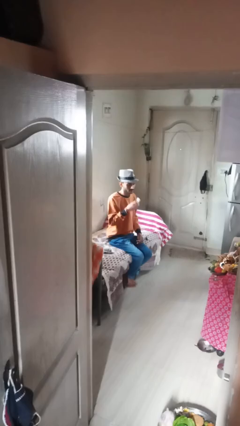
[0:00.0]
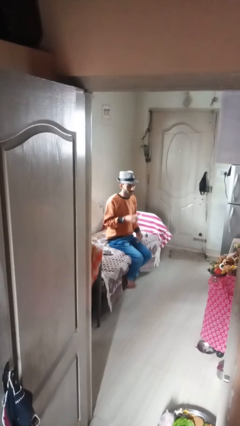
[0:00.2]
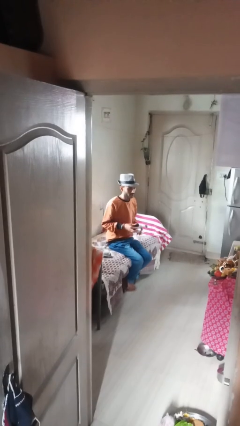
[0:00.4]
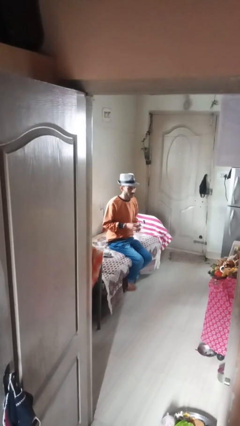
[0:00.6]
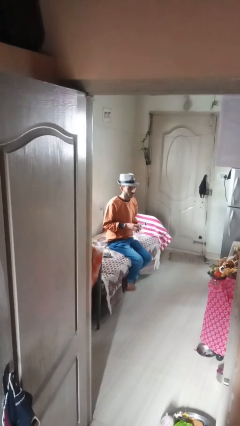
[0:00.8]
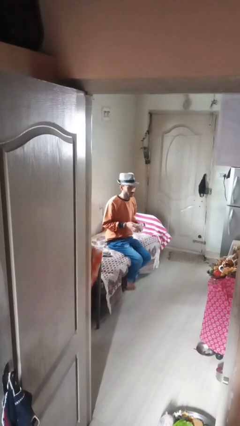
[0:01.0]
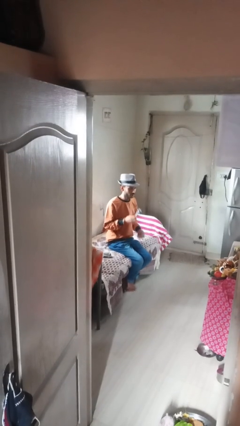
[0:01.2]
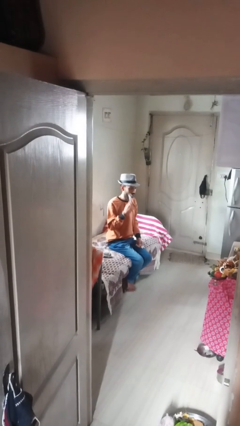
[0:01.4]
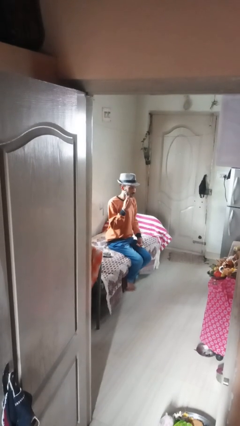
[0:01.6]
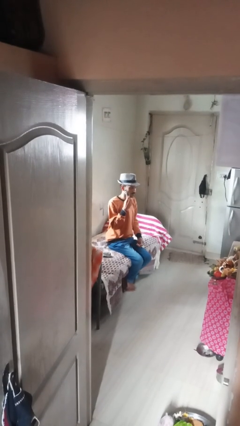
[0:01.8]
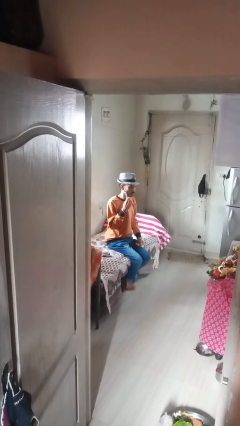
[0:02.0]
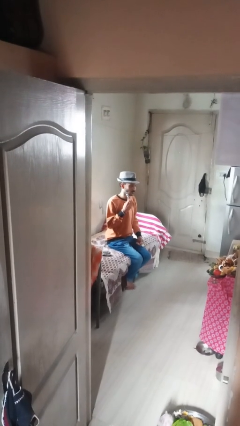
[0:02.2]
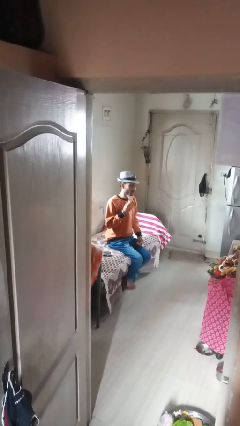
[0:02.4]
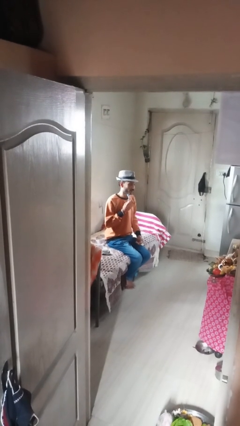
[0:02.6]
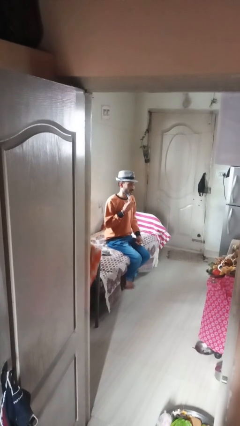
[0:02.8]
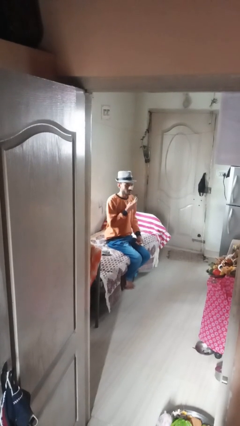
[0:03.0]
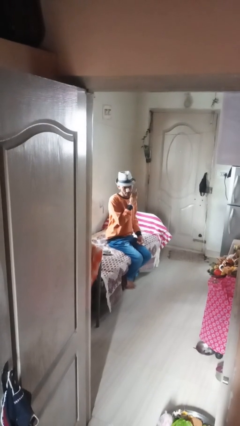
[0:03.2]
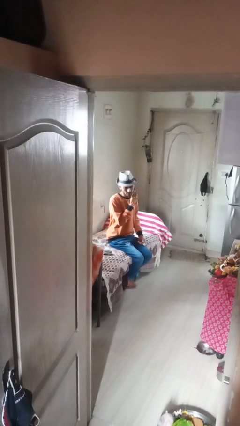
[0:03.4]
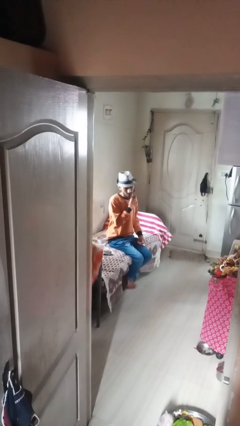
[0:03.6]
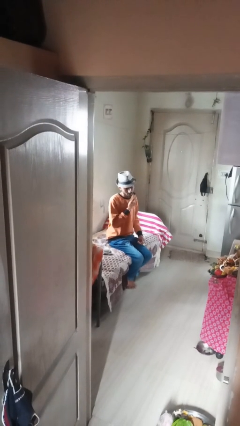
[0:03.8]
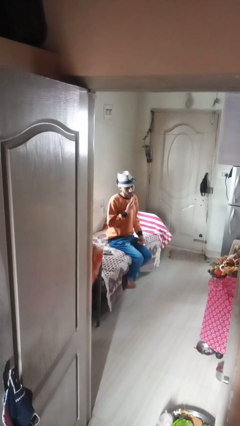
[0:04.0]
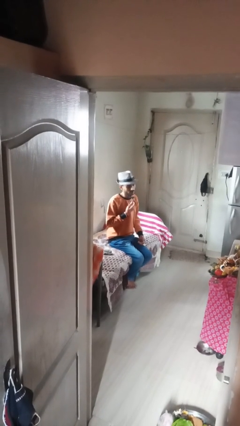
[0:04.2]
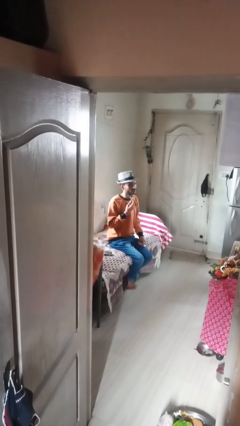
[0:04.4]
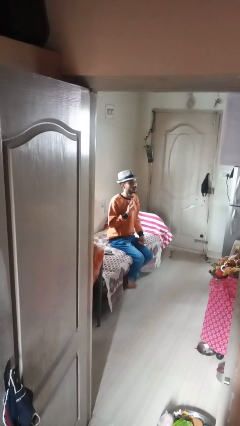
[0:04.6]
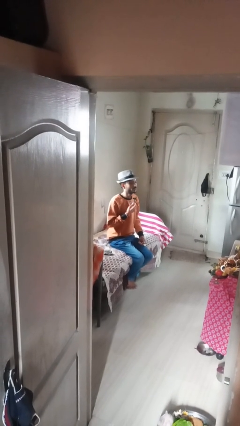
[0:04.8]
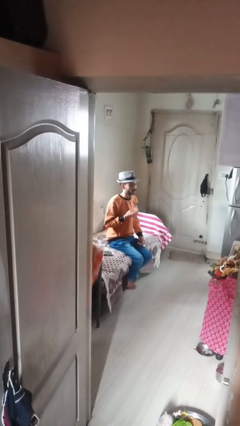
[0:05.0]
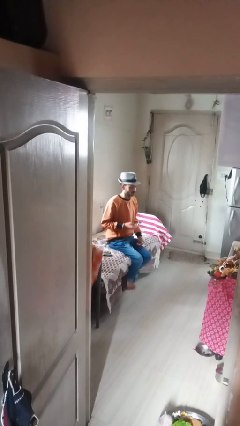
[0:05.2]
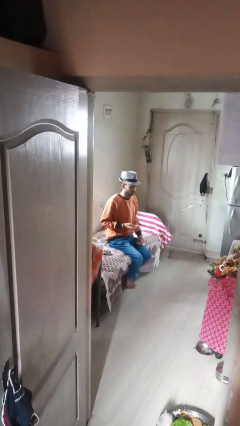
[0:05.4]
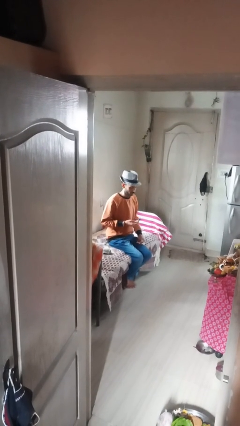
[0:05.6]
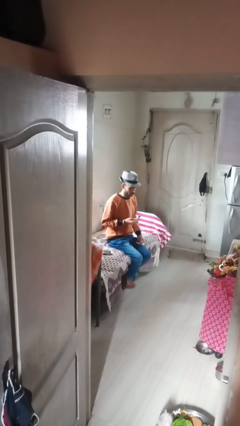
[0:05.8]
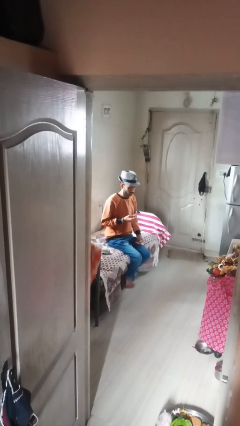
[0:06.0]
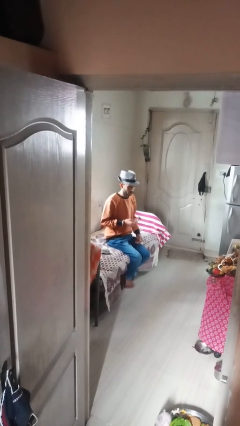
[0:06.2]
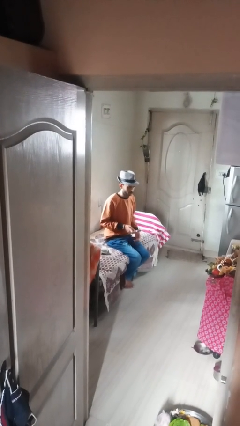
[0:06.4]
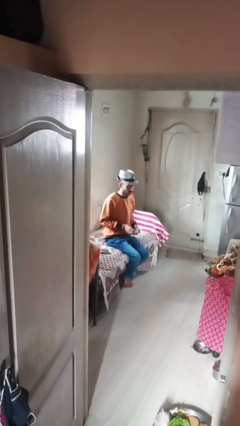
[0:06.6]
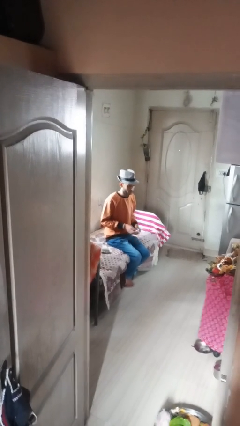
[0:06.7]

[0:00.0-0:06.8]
person shaves face

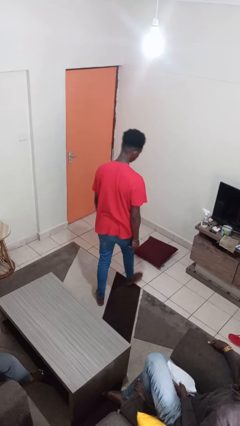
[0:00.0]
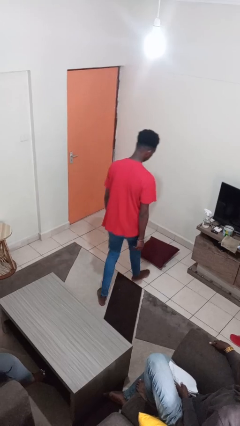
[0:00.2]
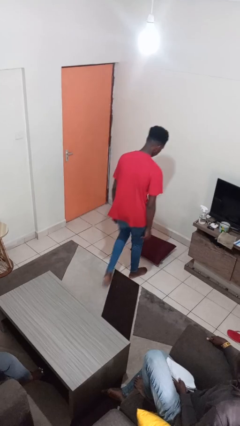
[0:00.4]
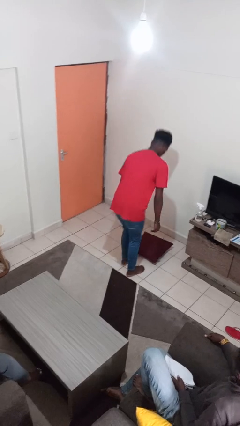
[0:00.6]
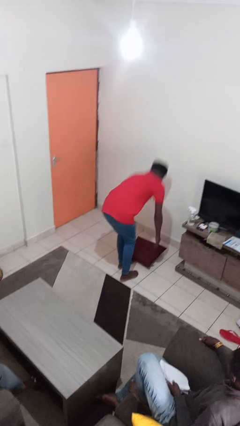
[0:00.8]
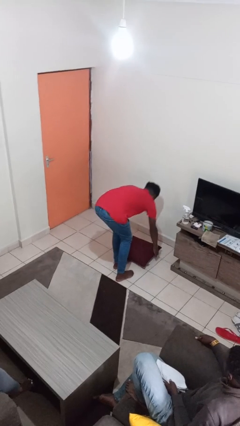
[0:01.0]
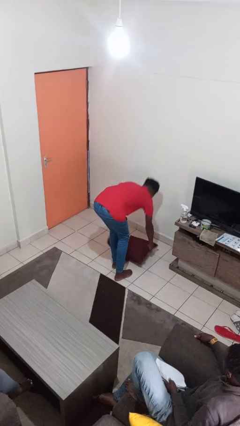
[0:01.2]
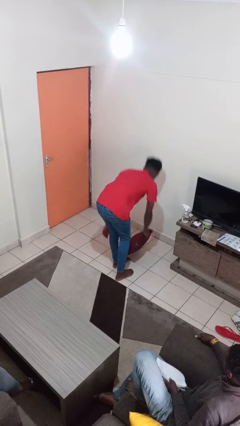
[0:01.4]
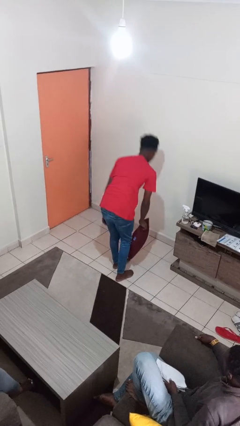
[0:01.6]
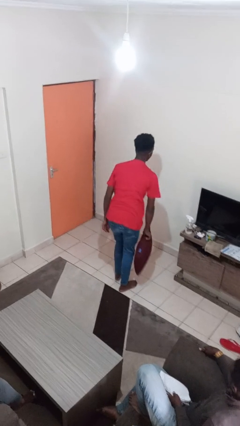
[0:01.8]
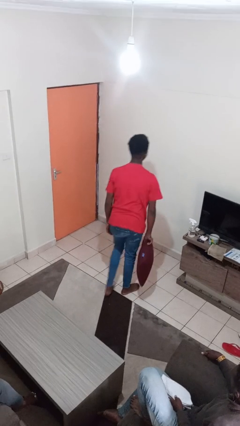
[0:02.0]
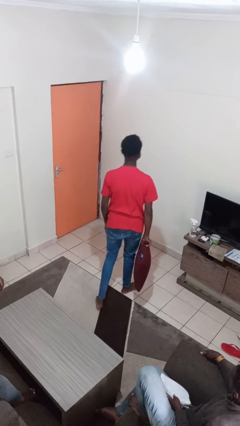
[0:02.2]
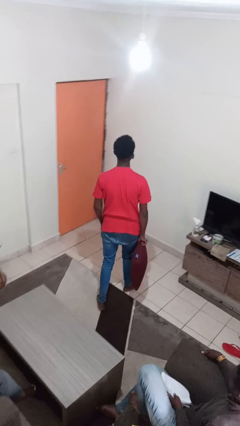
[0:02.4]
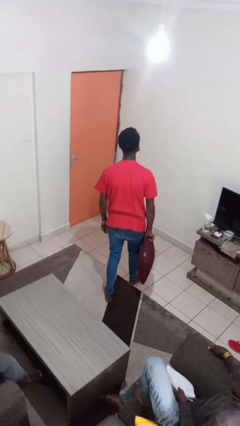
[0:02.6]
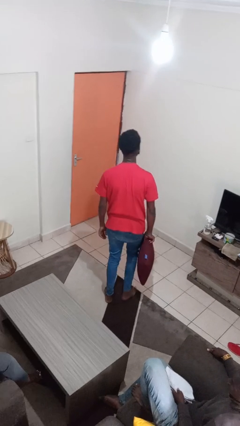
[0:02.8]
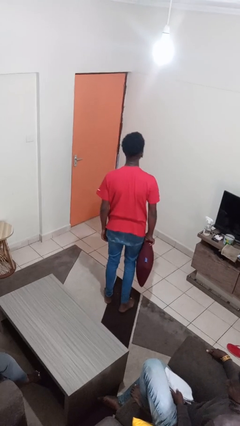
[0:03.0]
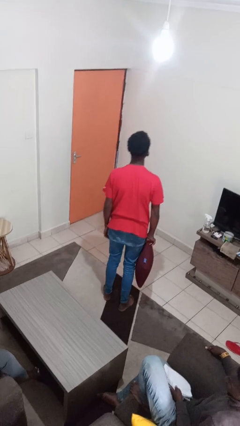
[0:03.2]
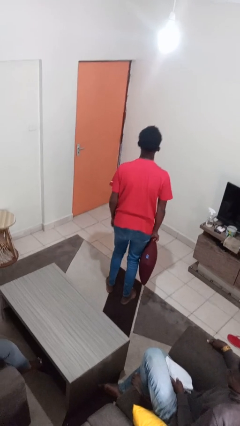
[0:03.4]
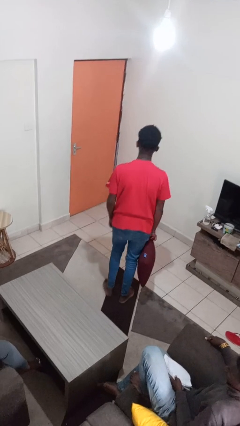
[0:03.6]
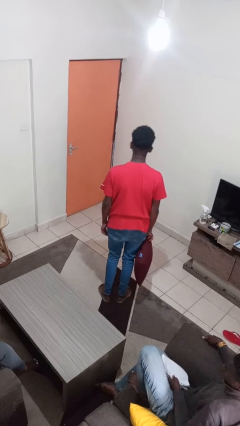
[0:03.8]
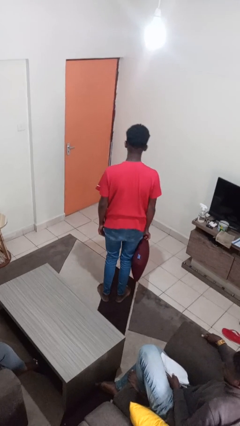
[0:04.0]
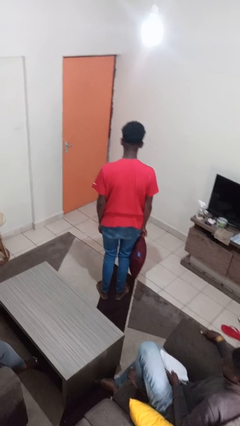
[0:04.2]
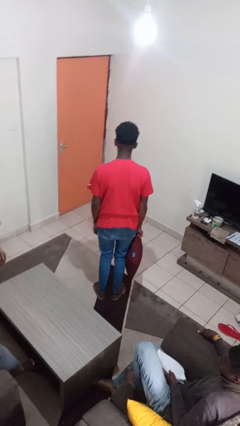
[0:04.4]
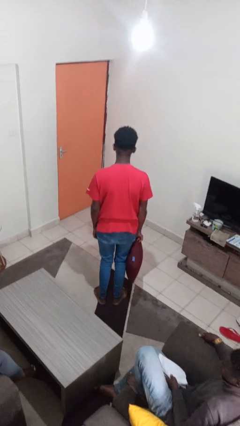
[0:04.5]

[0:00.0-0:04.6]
person picks up object from floor

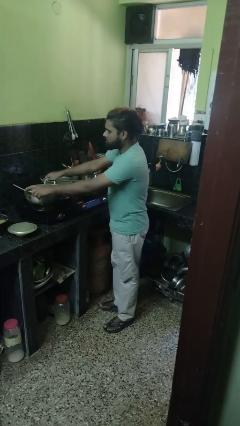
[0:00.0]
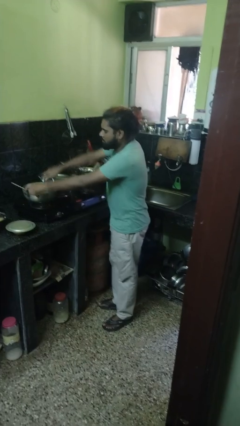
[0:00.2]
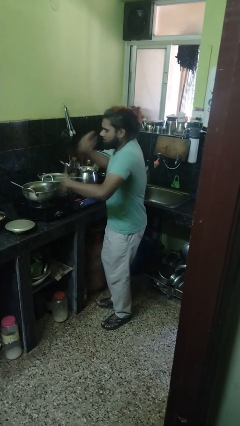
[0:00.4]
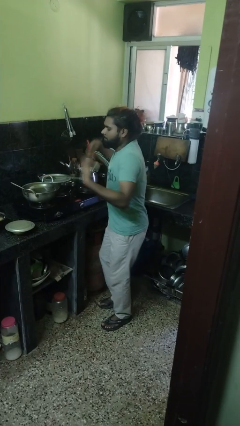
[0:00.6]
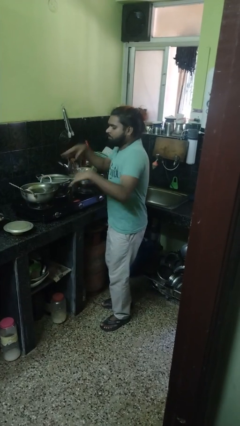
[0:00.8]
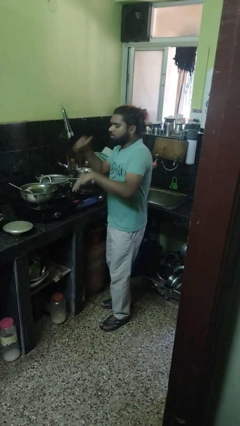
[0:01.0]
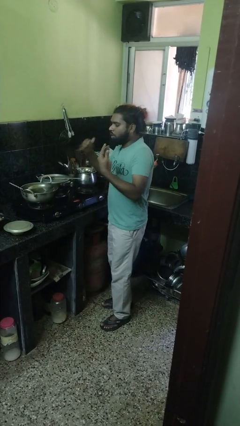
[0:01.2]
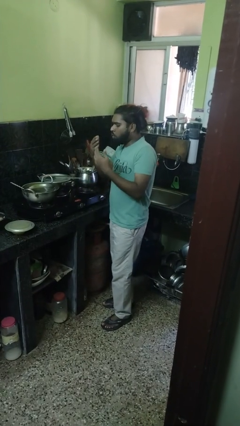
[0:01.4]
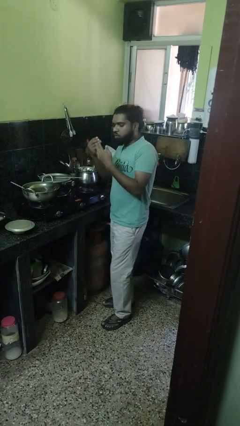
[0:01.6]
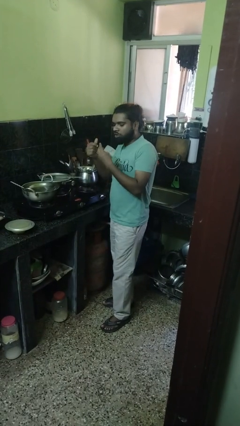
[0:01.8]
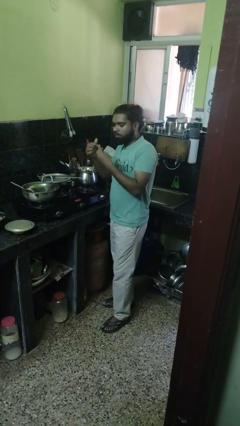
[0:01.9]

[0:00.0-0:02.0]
person burns hand

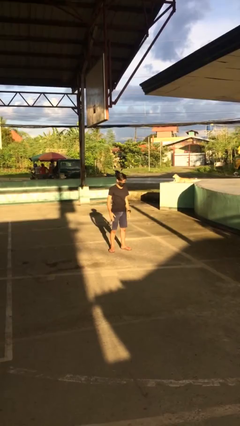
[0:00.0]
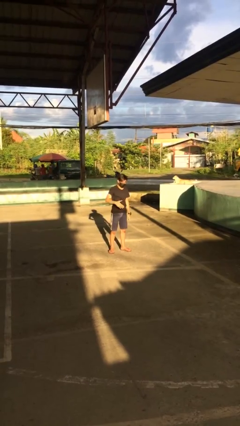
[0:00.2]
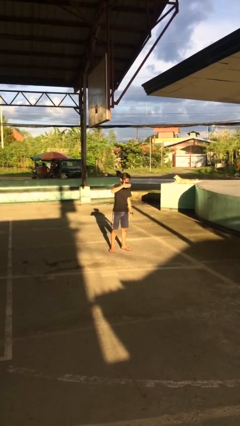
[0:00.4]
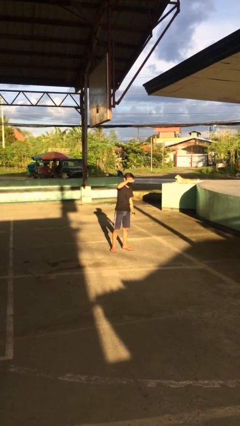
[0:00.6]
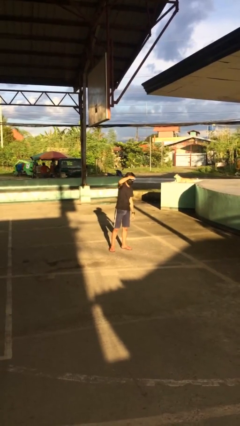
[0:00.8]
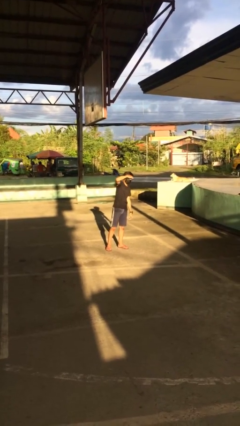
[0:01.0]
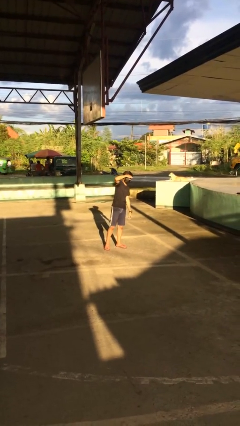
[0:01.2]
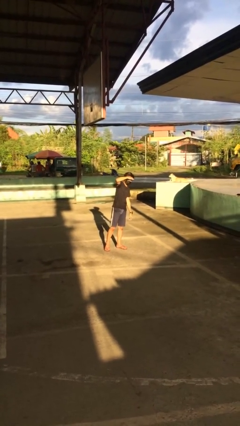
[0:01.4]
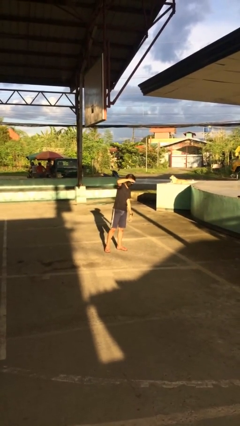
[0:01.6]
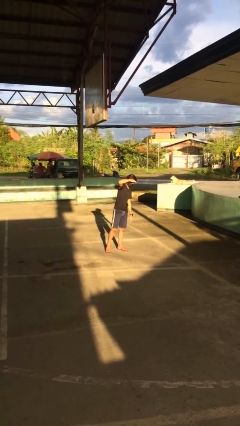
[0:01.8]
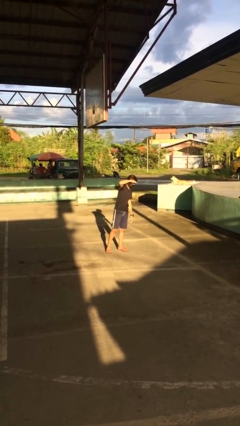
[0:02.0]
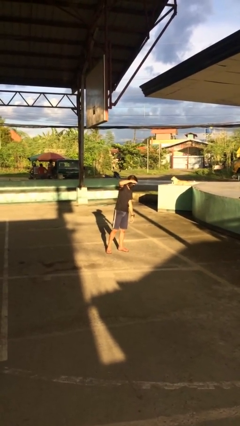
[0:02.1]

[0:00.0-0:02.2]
person shades eyes

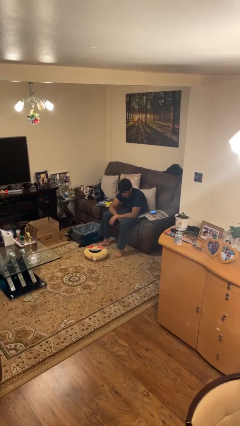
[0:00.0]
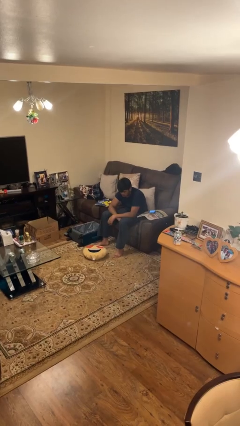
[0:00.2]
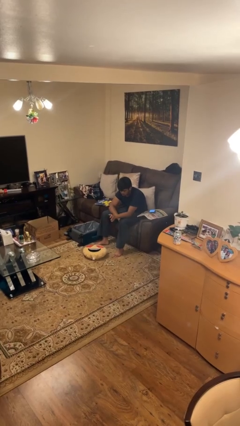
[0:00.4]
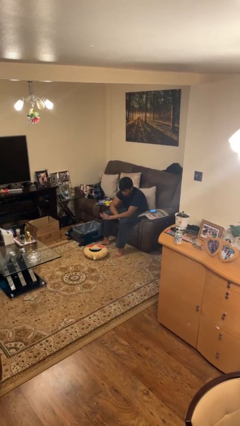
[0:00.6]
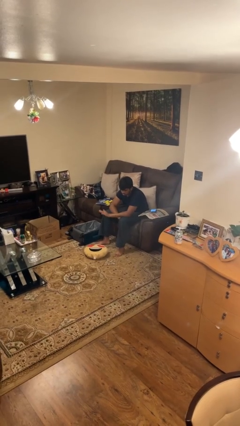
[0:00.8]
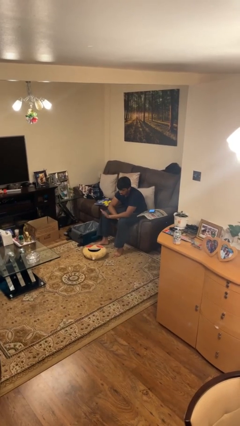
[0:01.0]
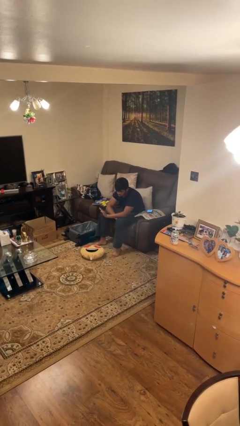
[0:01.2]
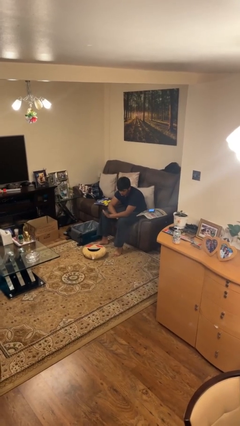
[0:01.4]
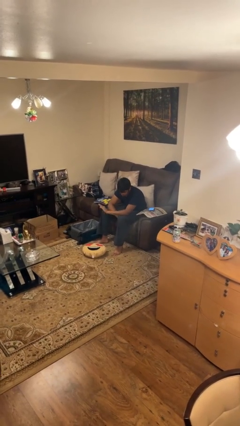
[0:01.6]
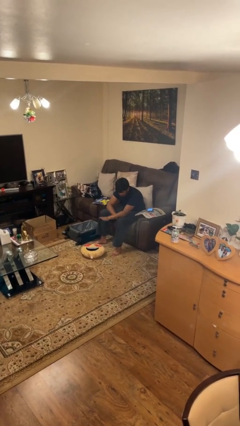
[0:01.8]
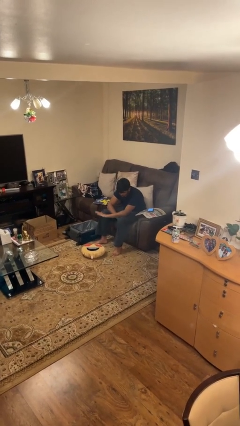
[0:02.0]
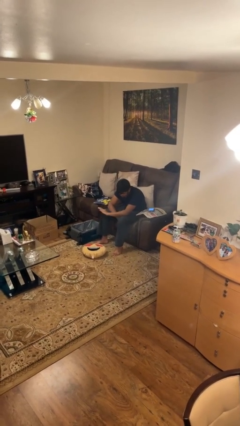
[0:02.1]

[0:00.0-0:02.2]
person waves hand over object
